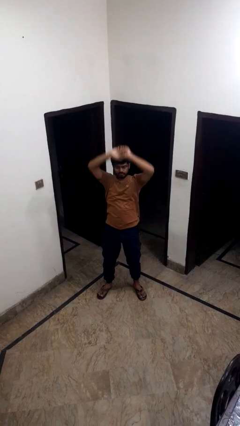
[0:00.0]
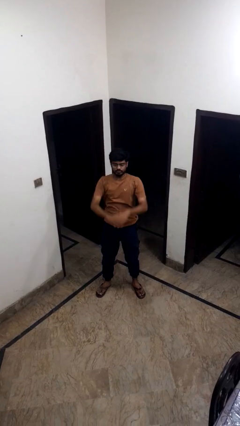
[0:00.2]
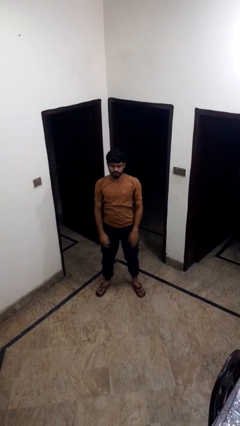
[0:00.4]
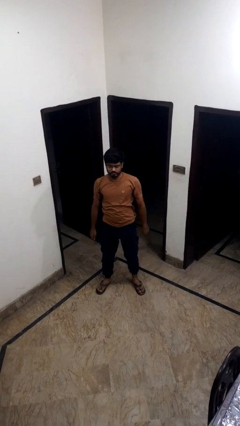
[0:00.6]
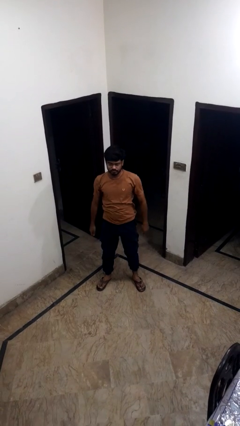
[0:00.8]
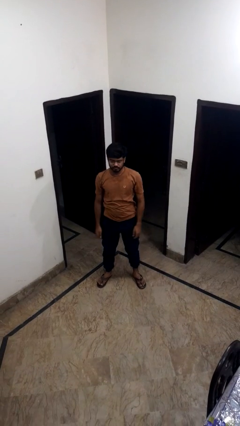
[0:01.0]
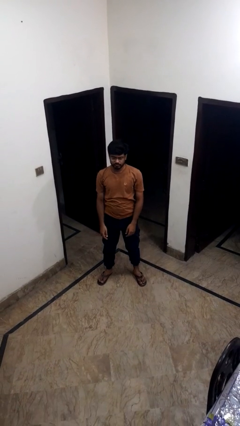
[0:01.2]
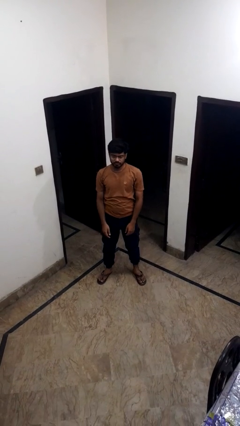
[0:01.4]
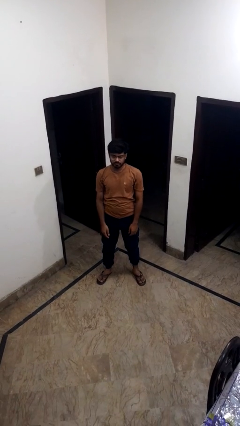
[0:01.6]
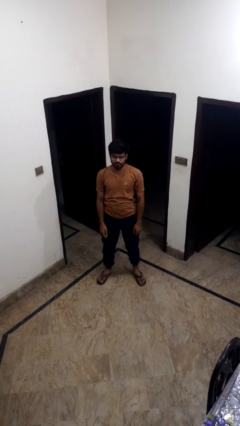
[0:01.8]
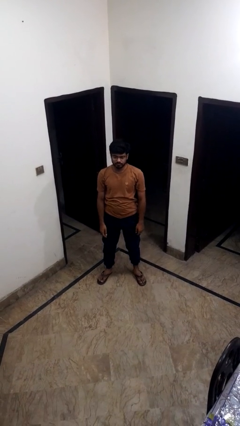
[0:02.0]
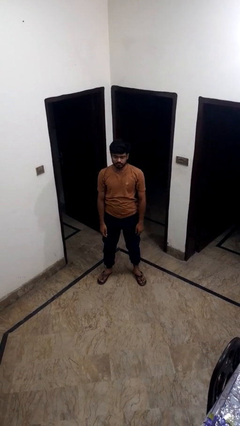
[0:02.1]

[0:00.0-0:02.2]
person unties jacket around waist

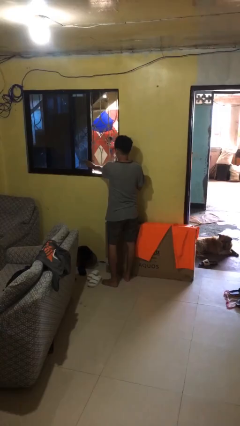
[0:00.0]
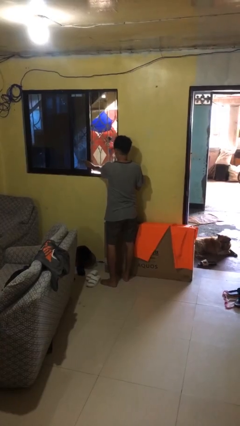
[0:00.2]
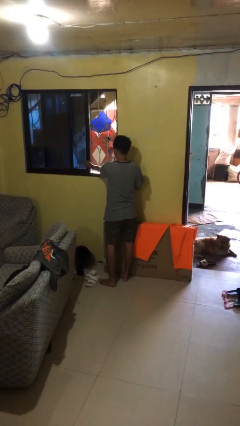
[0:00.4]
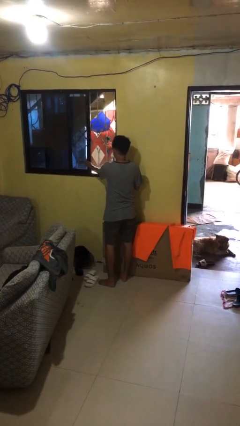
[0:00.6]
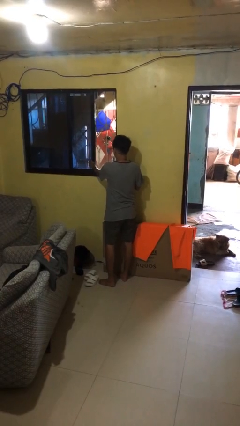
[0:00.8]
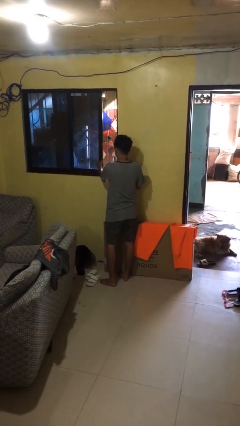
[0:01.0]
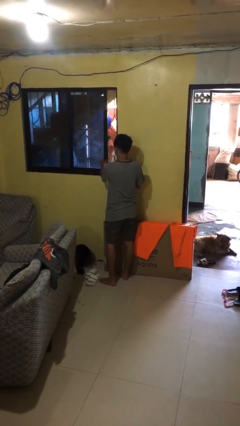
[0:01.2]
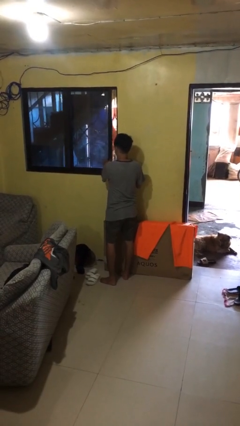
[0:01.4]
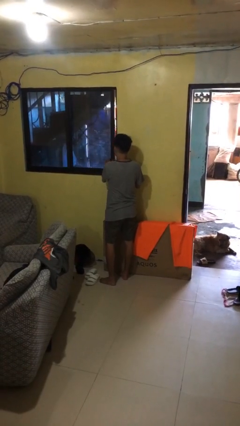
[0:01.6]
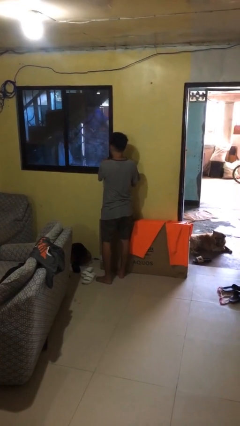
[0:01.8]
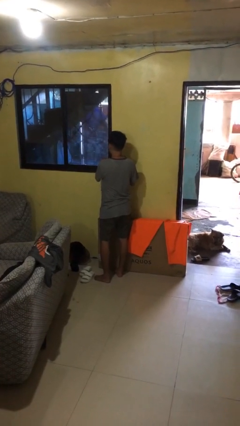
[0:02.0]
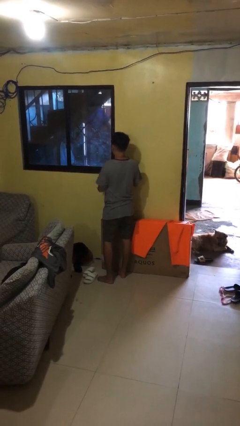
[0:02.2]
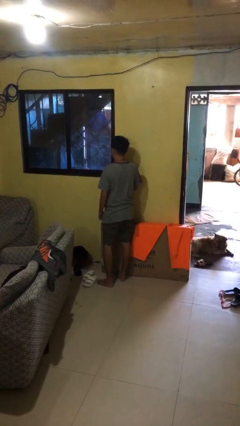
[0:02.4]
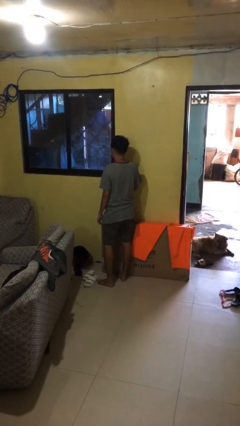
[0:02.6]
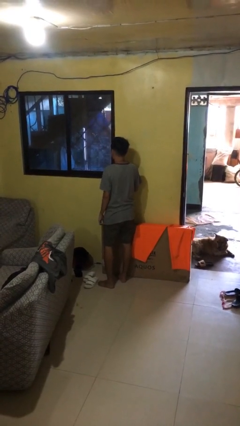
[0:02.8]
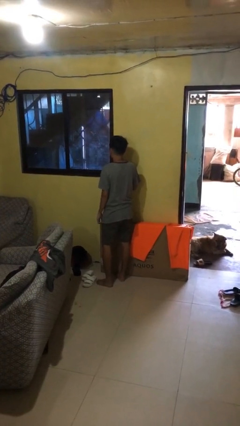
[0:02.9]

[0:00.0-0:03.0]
person closes home window

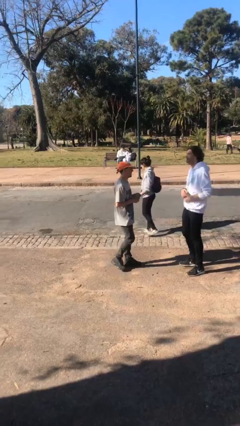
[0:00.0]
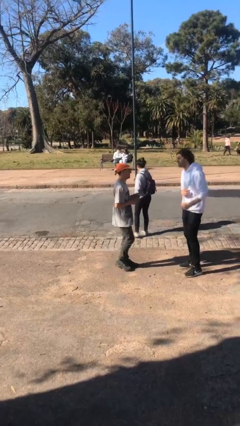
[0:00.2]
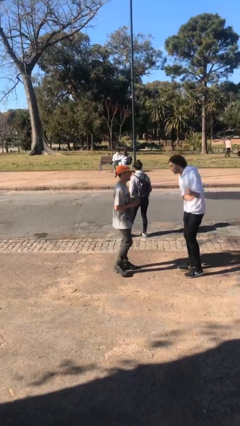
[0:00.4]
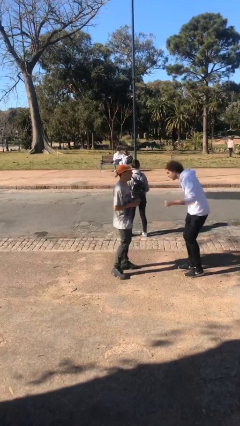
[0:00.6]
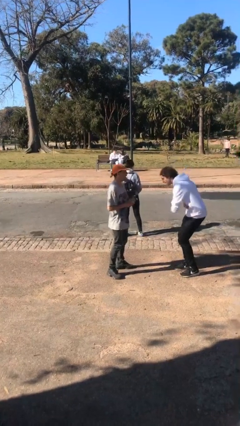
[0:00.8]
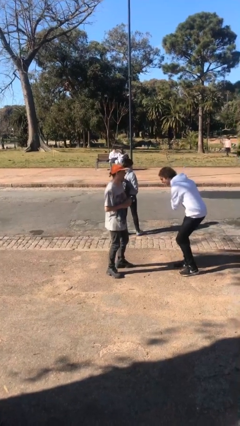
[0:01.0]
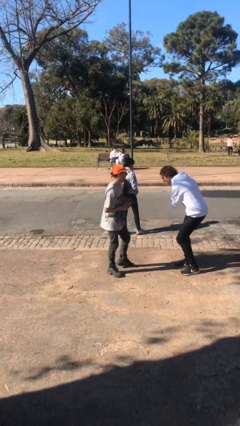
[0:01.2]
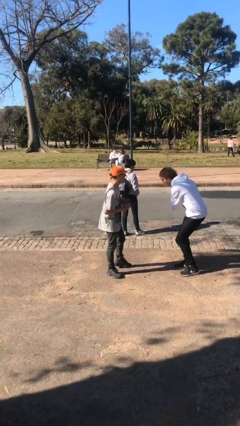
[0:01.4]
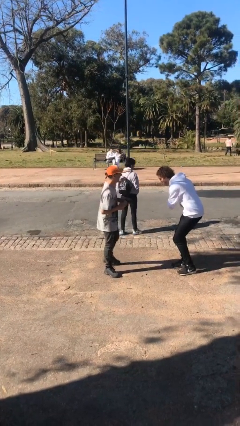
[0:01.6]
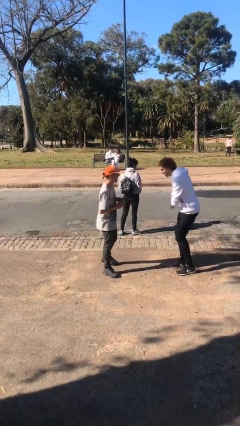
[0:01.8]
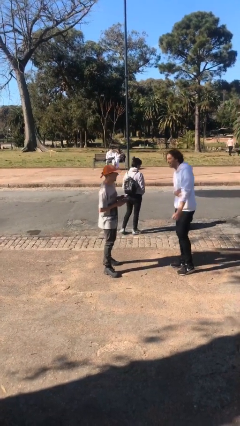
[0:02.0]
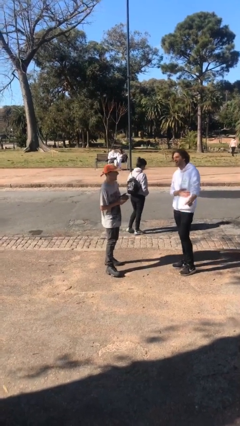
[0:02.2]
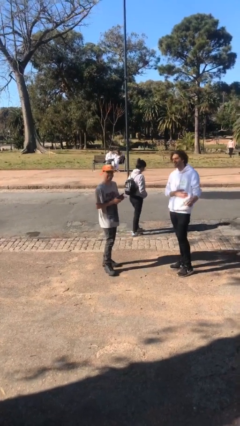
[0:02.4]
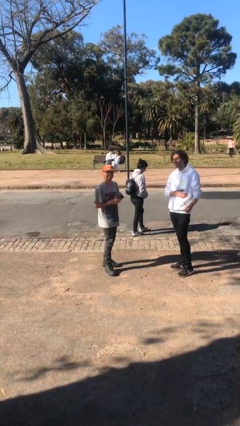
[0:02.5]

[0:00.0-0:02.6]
person laughs with person

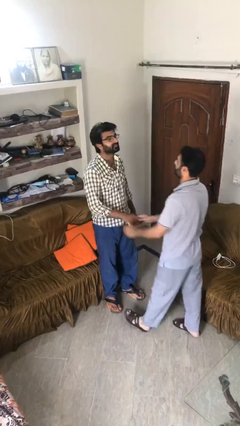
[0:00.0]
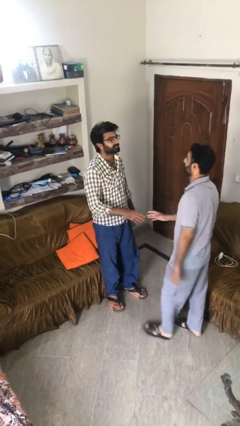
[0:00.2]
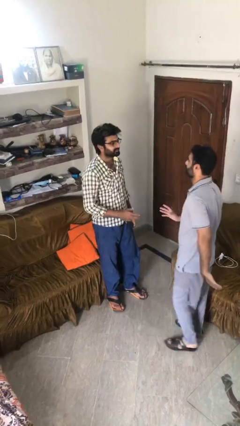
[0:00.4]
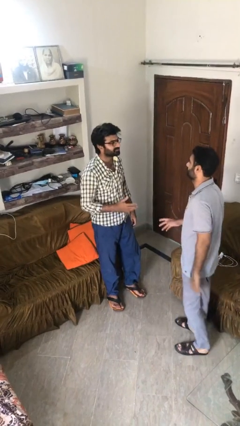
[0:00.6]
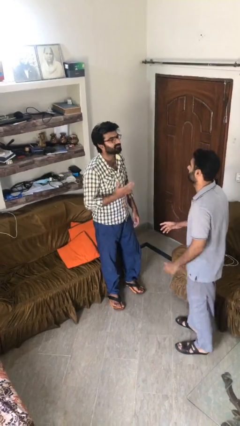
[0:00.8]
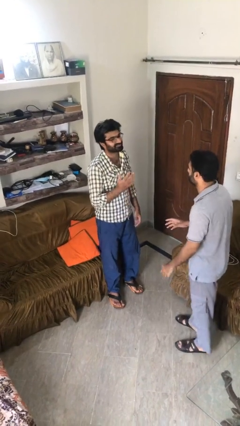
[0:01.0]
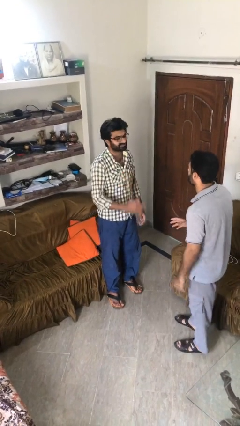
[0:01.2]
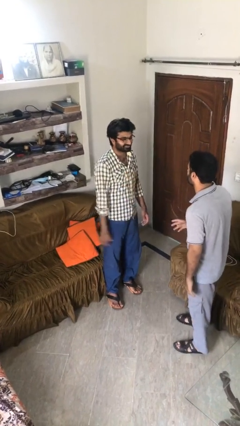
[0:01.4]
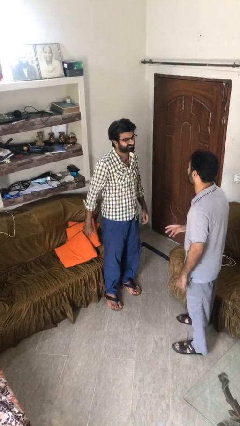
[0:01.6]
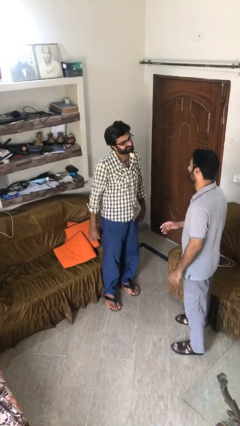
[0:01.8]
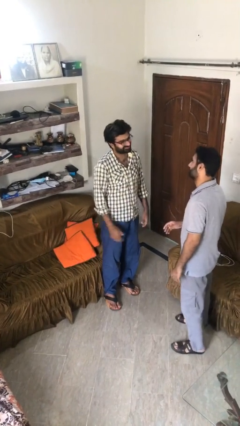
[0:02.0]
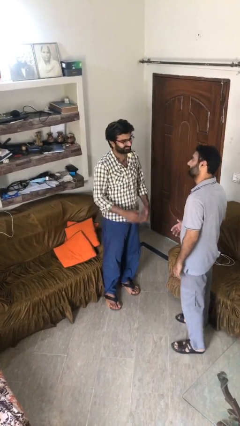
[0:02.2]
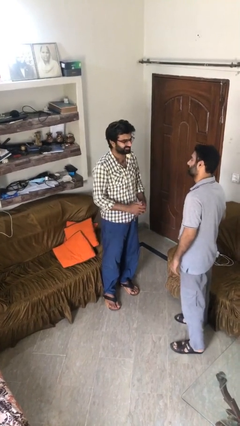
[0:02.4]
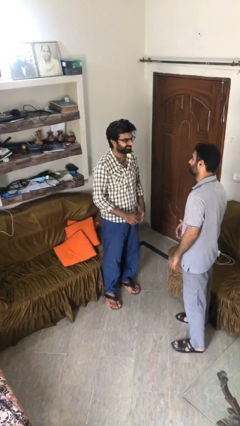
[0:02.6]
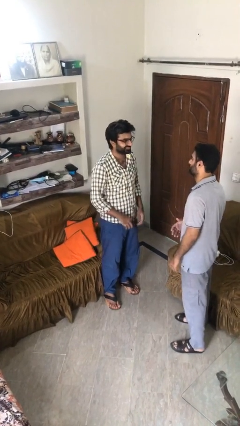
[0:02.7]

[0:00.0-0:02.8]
person talks to person

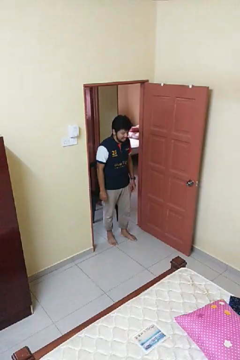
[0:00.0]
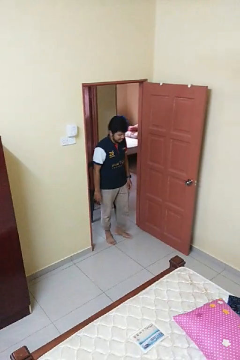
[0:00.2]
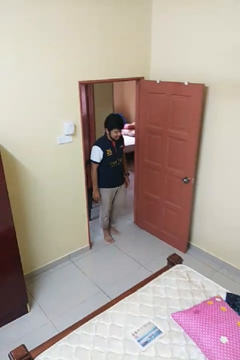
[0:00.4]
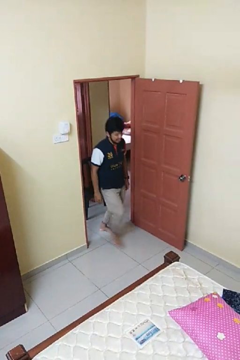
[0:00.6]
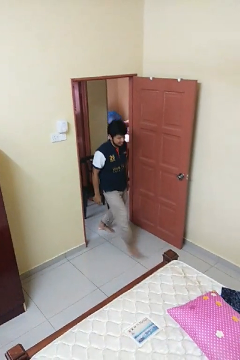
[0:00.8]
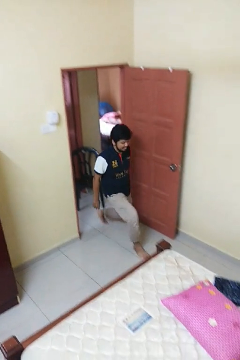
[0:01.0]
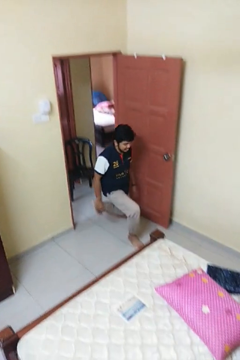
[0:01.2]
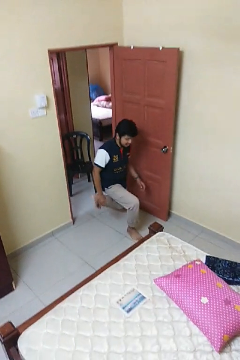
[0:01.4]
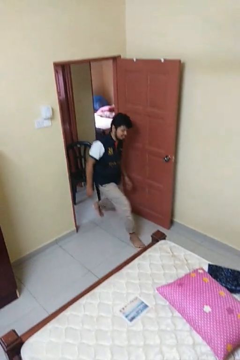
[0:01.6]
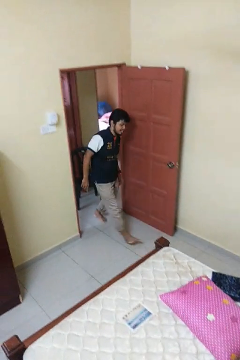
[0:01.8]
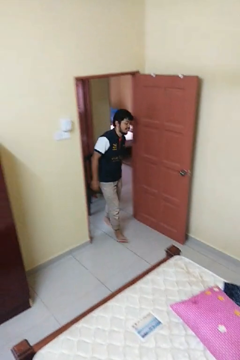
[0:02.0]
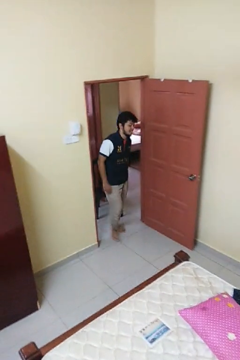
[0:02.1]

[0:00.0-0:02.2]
person exercises with lunges

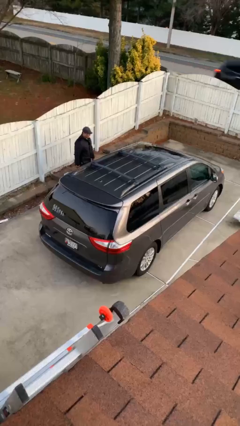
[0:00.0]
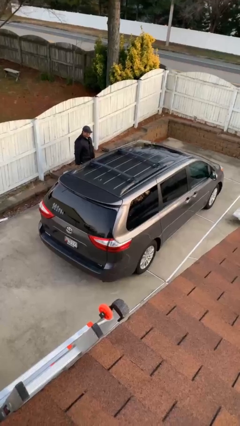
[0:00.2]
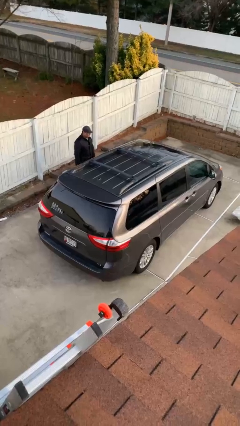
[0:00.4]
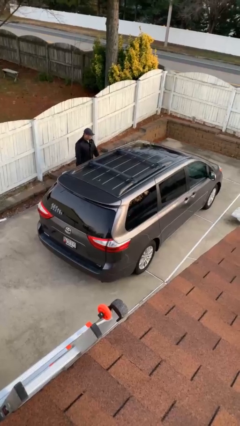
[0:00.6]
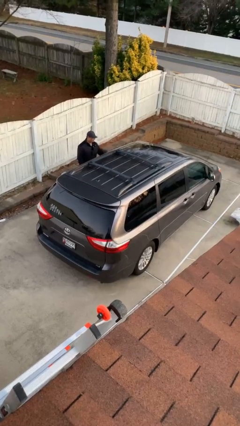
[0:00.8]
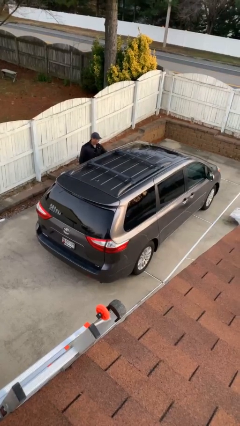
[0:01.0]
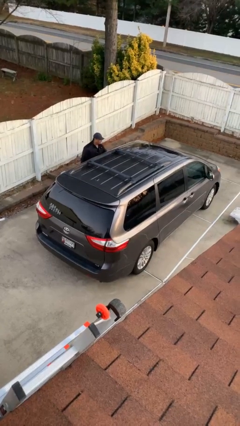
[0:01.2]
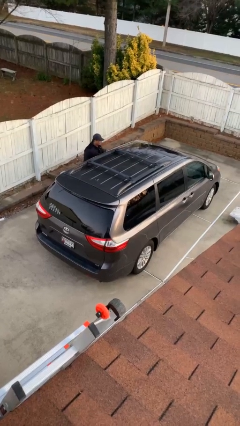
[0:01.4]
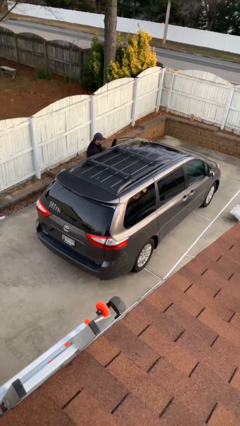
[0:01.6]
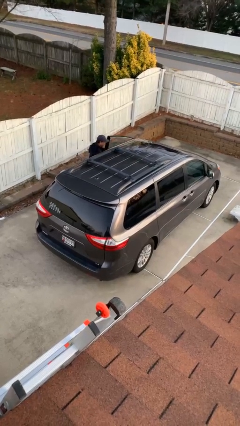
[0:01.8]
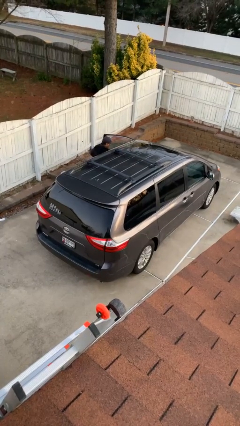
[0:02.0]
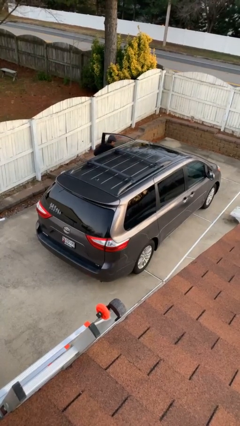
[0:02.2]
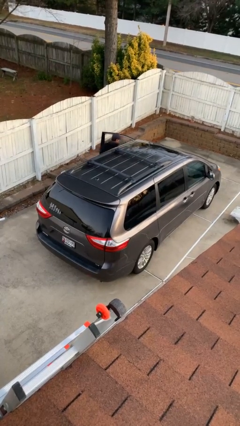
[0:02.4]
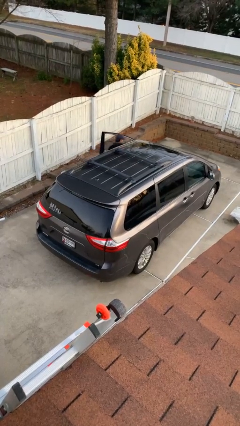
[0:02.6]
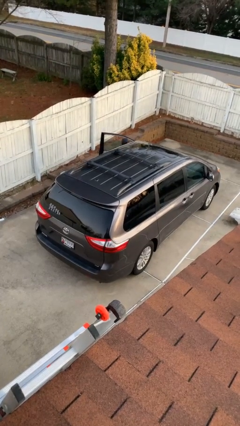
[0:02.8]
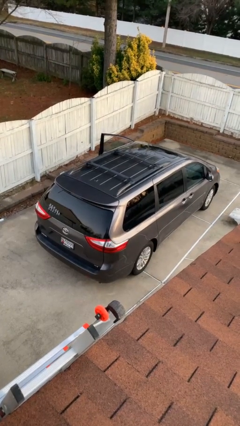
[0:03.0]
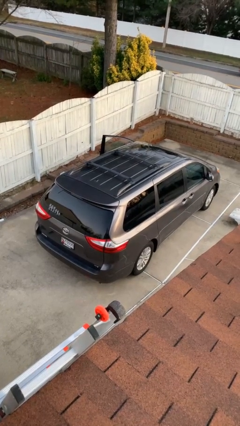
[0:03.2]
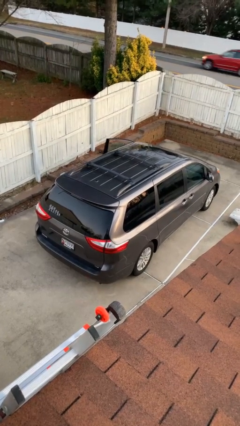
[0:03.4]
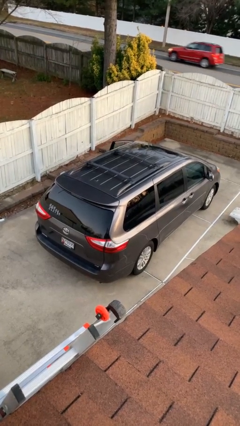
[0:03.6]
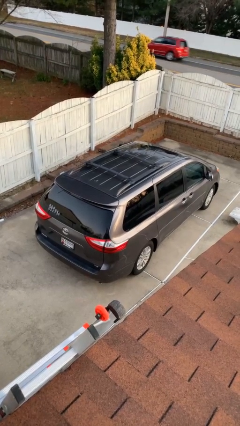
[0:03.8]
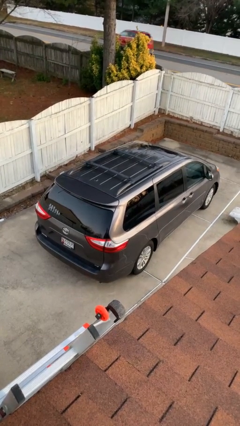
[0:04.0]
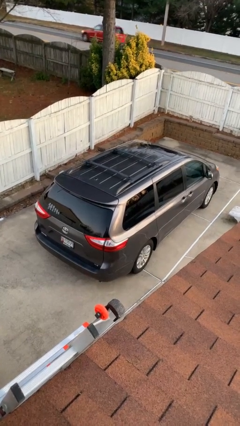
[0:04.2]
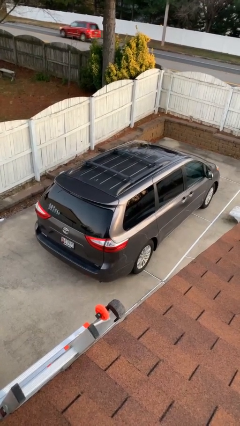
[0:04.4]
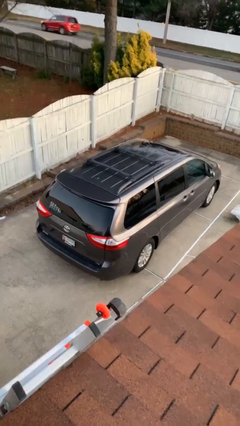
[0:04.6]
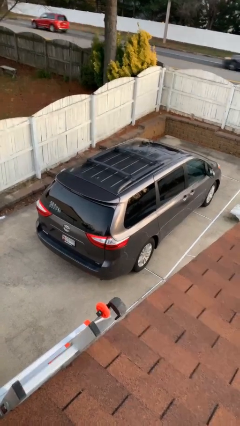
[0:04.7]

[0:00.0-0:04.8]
car picks up person
